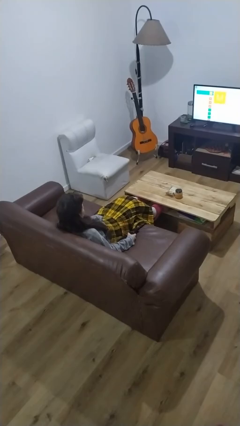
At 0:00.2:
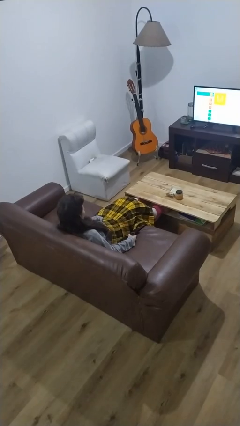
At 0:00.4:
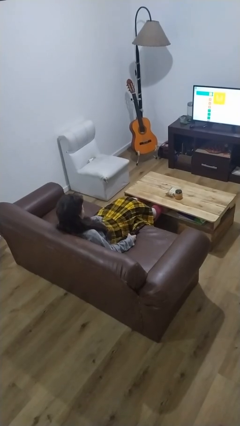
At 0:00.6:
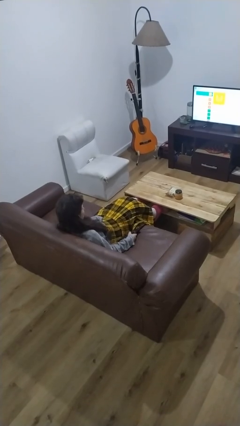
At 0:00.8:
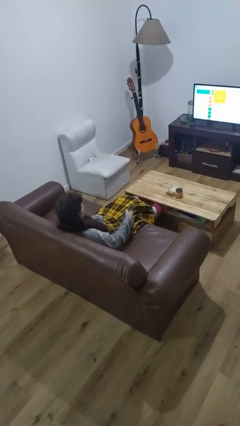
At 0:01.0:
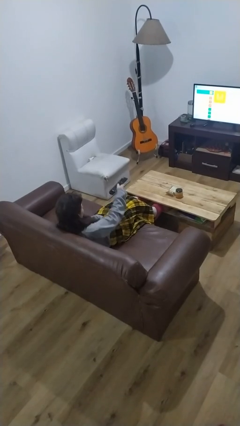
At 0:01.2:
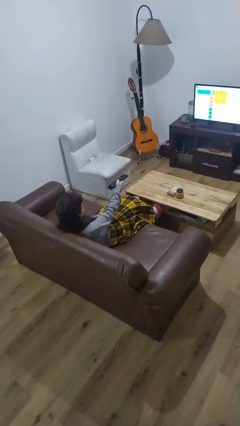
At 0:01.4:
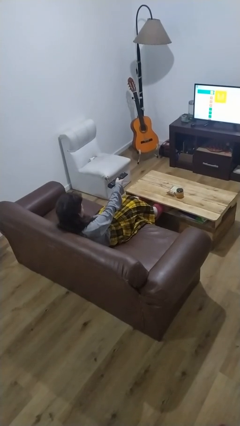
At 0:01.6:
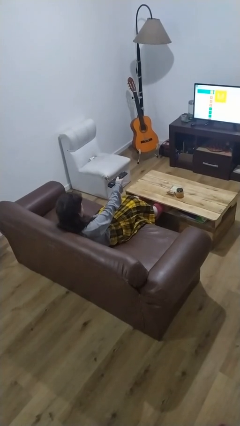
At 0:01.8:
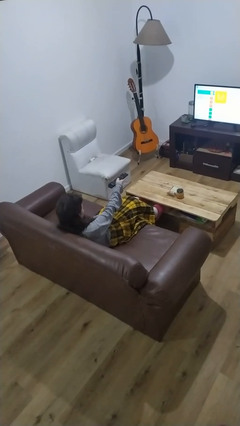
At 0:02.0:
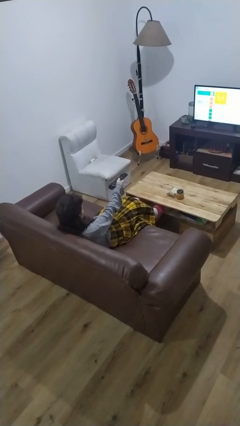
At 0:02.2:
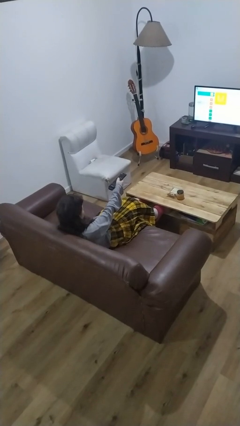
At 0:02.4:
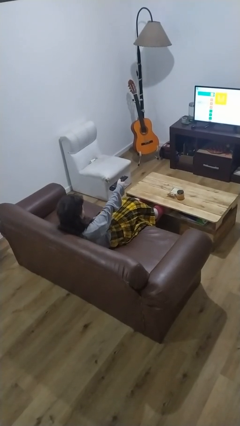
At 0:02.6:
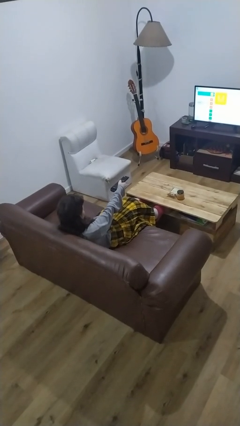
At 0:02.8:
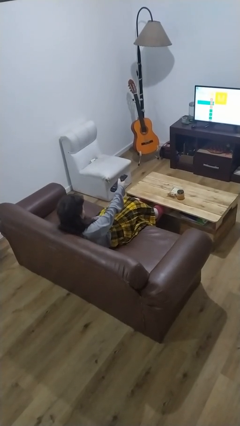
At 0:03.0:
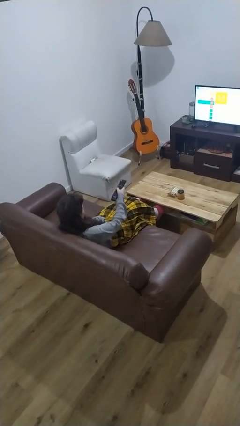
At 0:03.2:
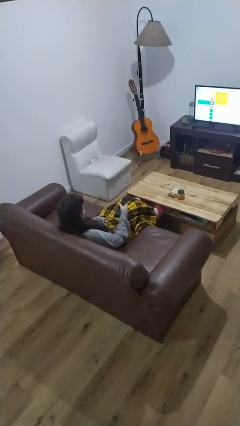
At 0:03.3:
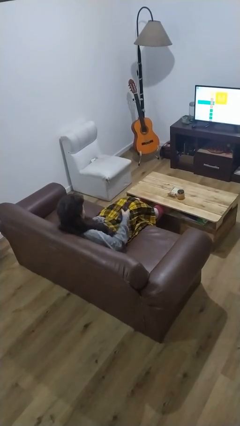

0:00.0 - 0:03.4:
person uses television remote

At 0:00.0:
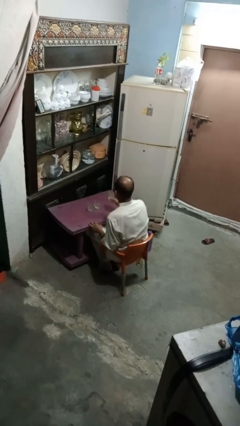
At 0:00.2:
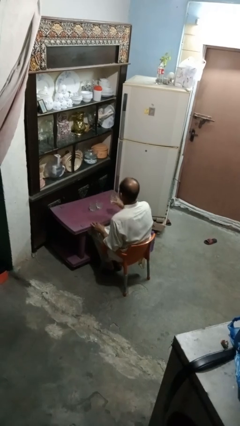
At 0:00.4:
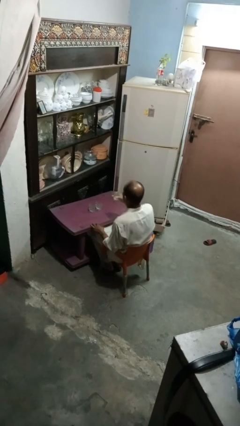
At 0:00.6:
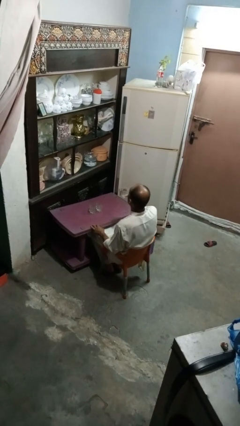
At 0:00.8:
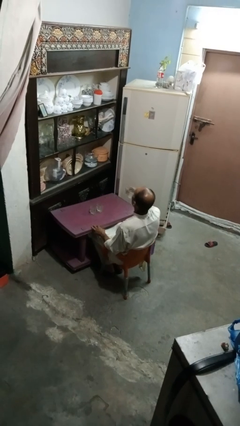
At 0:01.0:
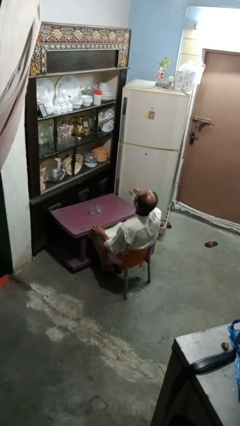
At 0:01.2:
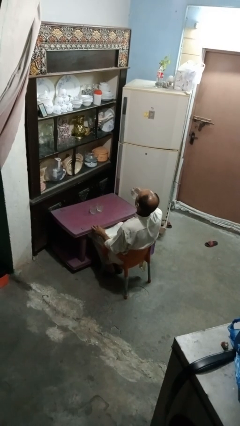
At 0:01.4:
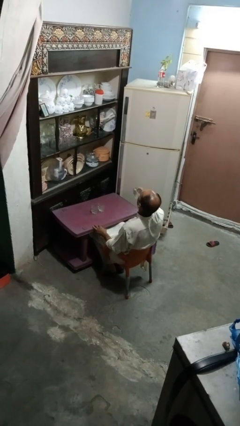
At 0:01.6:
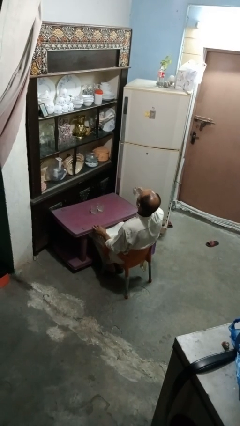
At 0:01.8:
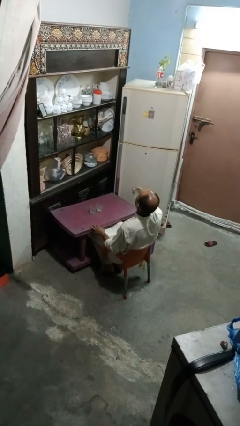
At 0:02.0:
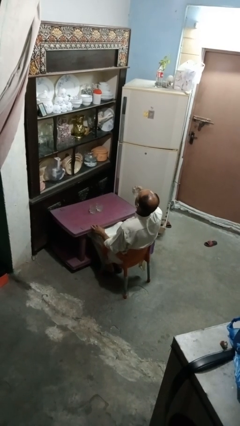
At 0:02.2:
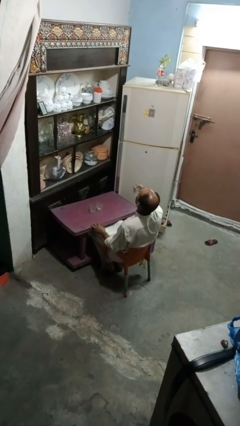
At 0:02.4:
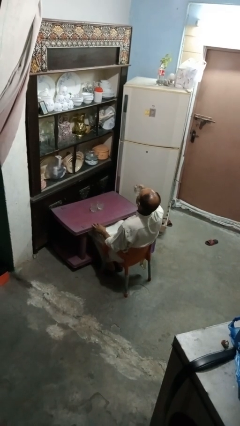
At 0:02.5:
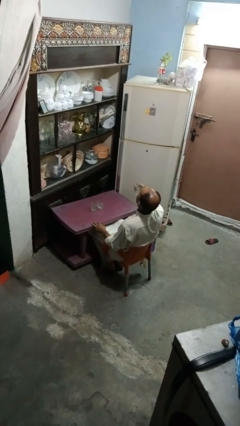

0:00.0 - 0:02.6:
person drinks from shotglass

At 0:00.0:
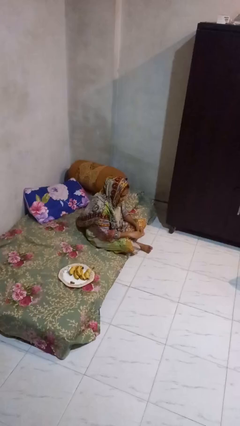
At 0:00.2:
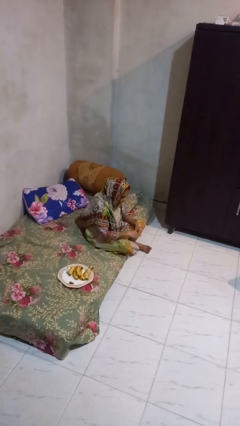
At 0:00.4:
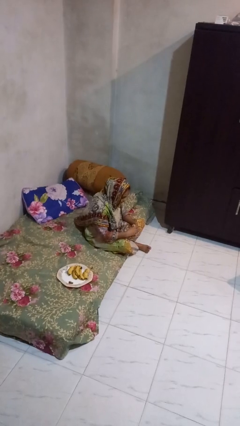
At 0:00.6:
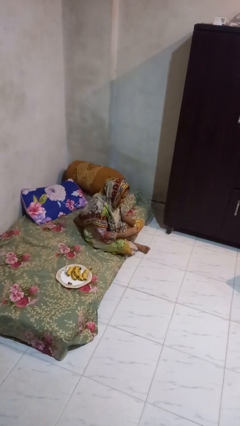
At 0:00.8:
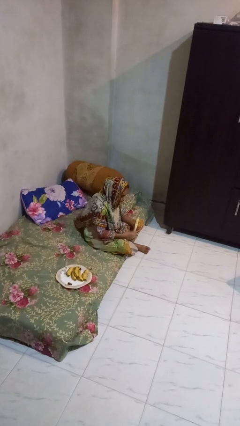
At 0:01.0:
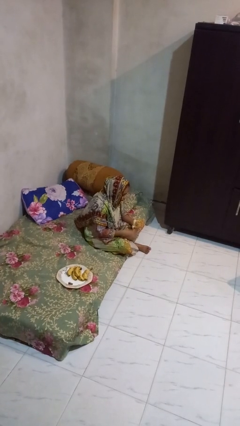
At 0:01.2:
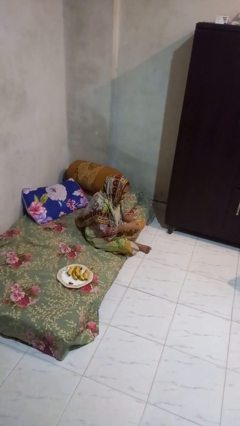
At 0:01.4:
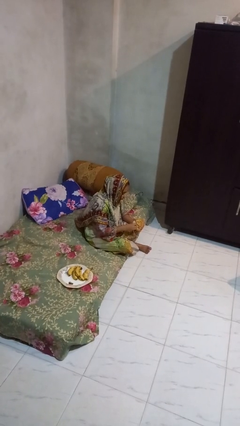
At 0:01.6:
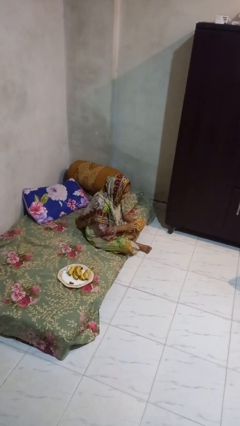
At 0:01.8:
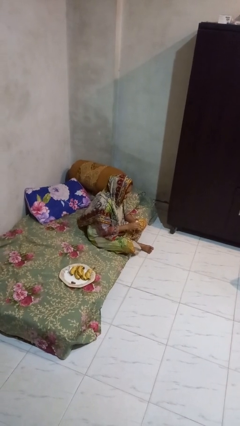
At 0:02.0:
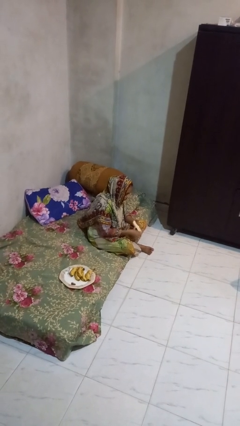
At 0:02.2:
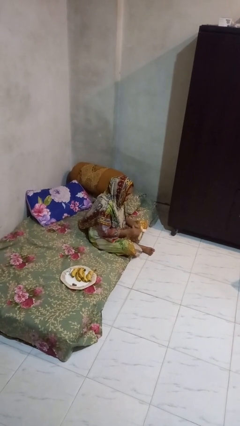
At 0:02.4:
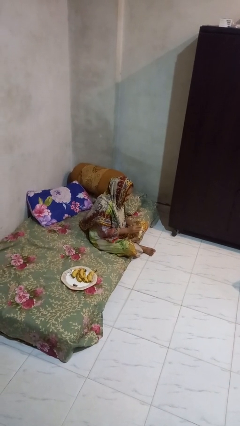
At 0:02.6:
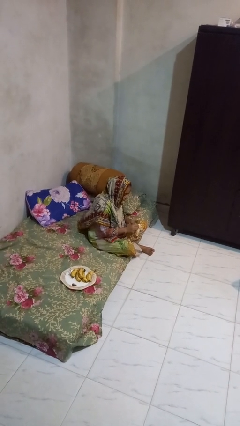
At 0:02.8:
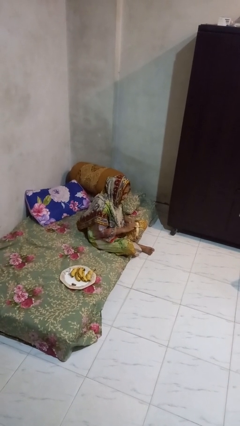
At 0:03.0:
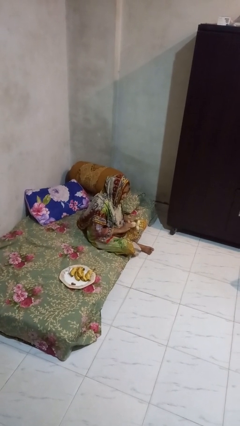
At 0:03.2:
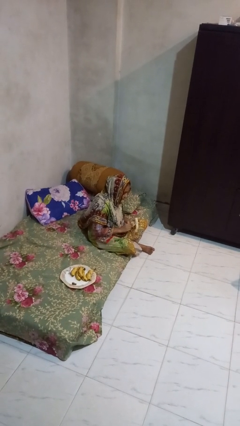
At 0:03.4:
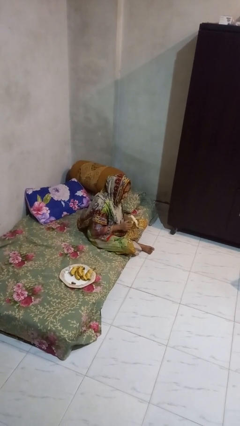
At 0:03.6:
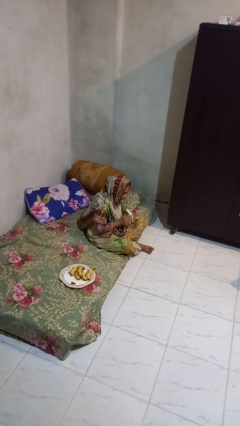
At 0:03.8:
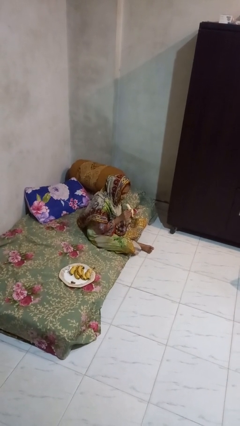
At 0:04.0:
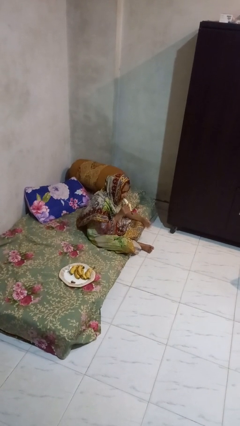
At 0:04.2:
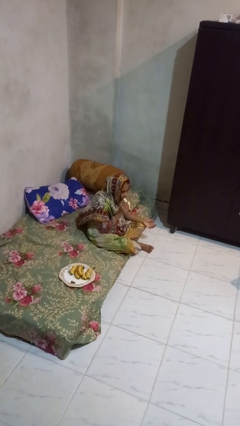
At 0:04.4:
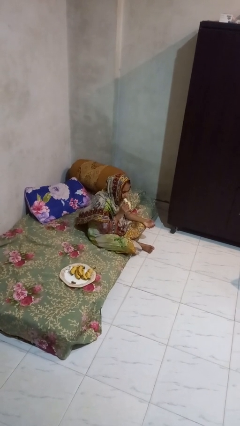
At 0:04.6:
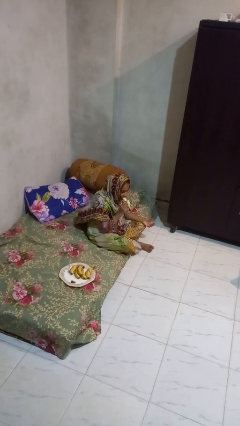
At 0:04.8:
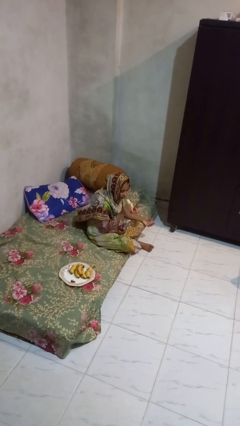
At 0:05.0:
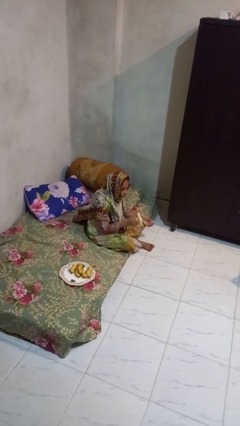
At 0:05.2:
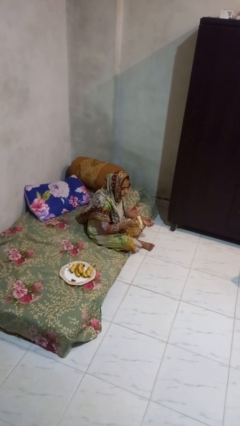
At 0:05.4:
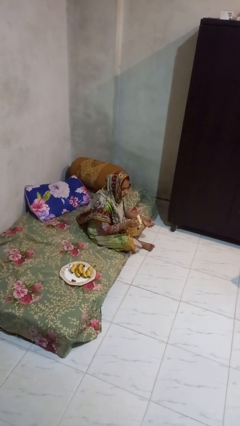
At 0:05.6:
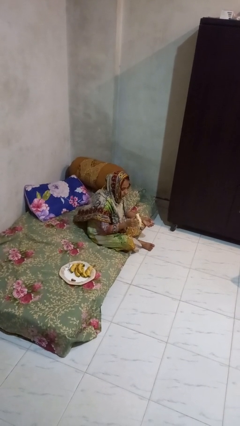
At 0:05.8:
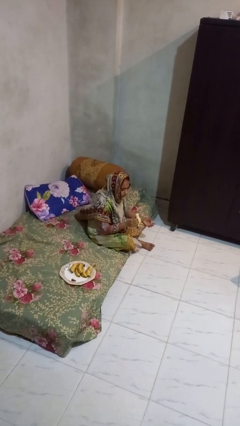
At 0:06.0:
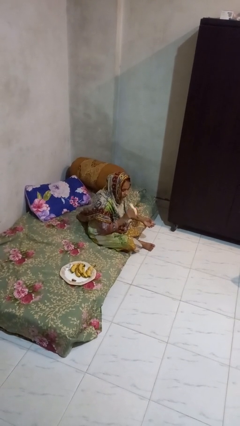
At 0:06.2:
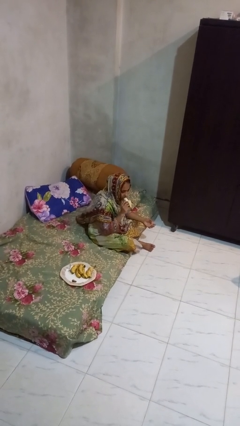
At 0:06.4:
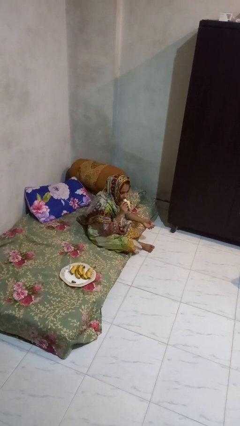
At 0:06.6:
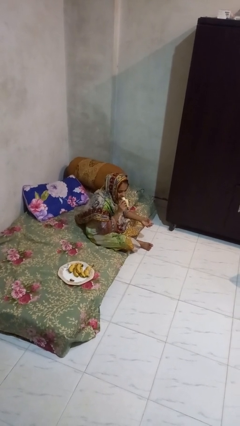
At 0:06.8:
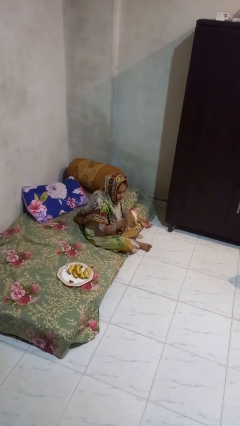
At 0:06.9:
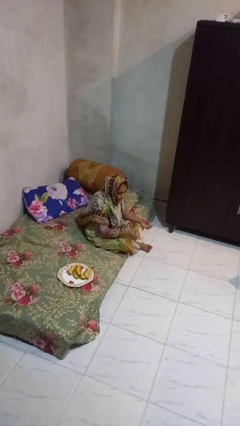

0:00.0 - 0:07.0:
person eats banana

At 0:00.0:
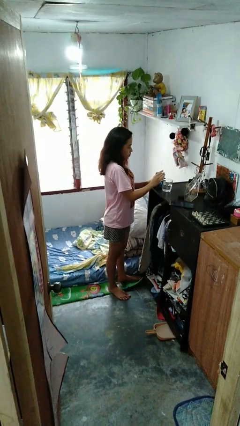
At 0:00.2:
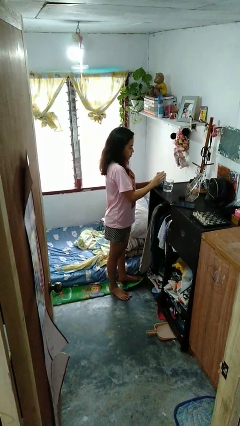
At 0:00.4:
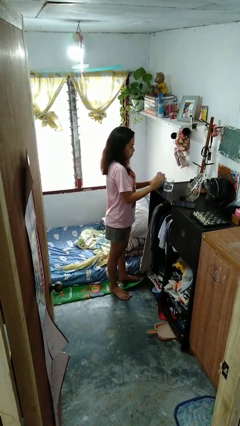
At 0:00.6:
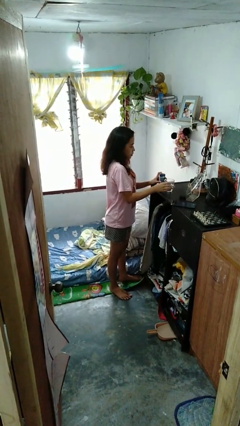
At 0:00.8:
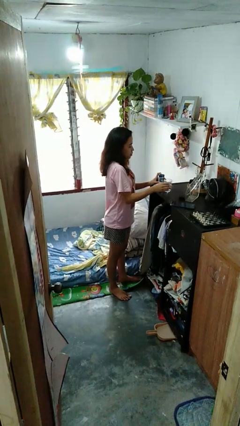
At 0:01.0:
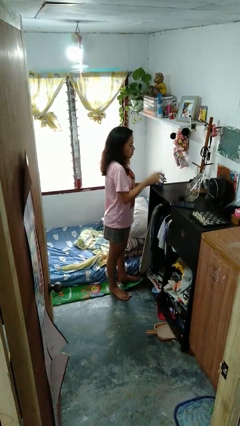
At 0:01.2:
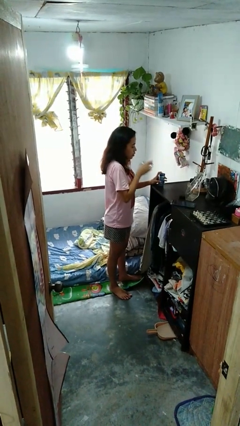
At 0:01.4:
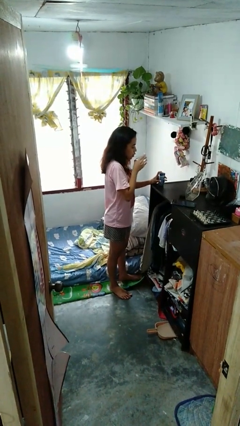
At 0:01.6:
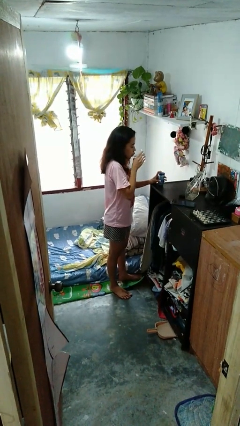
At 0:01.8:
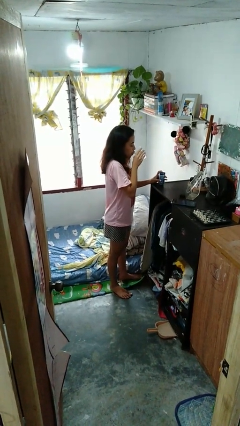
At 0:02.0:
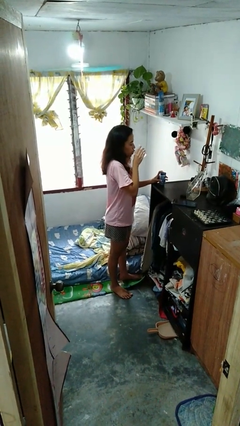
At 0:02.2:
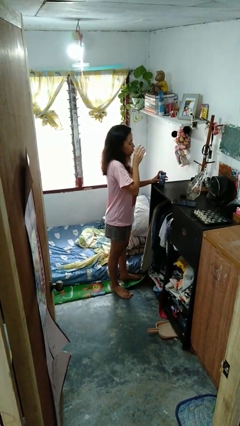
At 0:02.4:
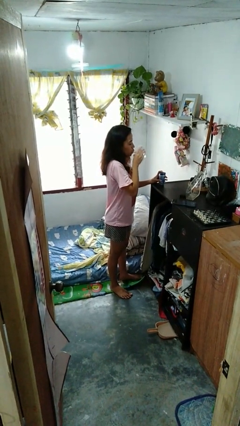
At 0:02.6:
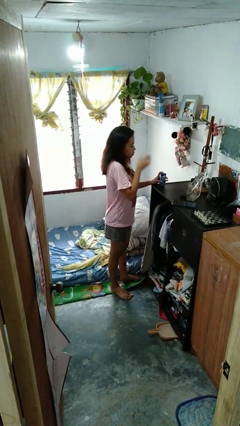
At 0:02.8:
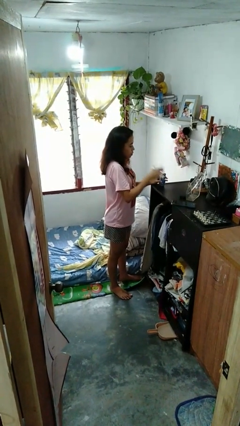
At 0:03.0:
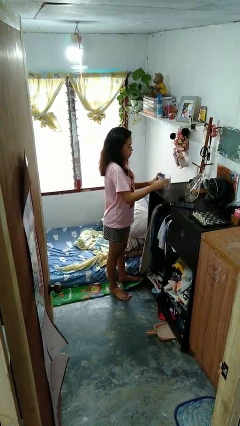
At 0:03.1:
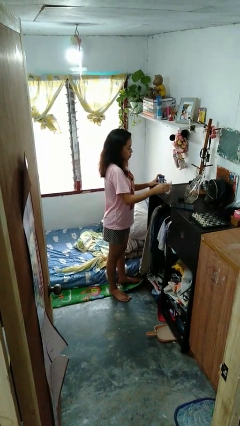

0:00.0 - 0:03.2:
person drinks from cup

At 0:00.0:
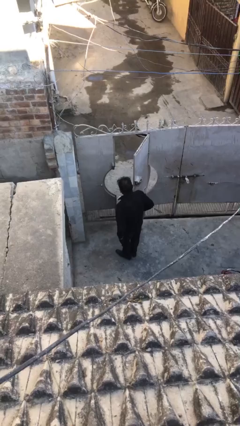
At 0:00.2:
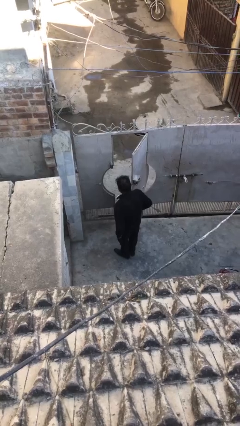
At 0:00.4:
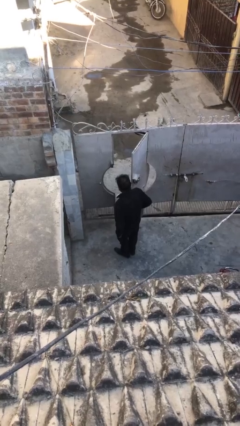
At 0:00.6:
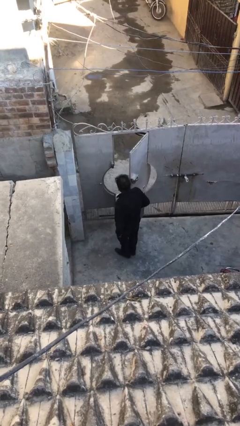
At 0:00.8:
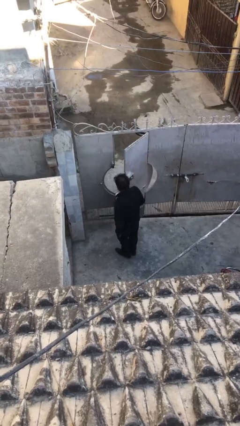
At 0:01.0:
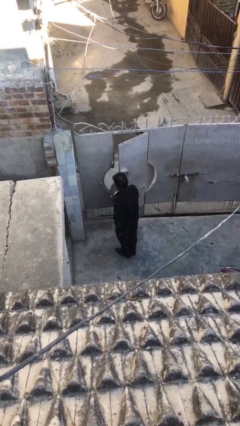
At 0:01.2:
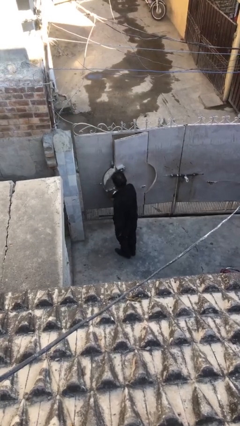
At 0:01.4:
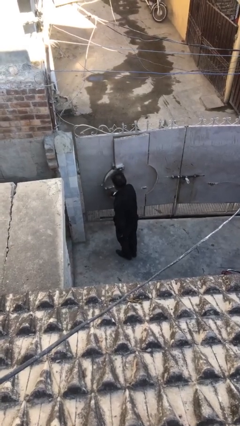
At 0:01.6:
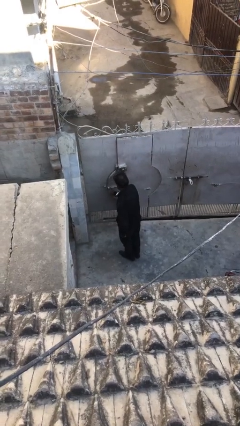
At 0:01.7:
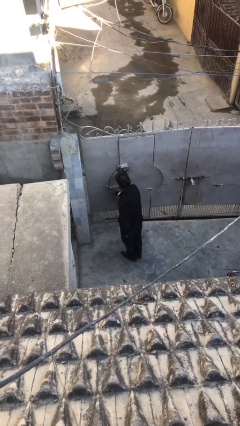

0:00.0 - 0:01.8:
person closes facility door
